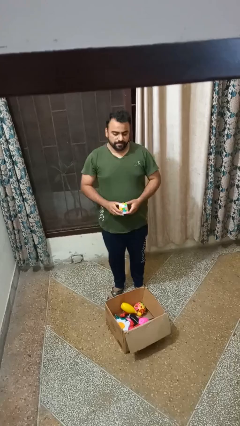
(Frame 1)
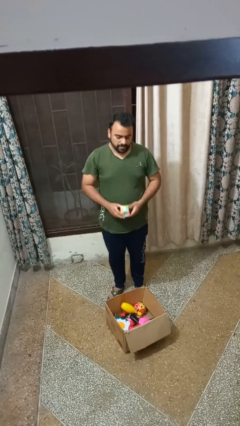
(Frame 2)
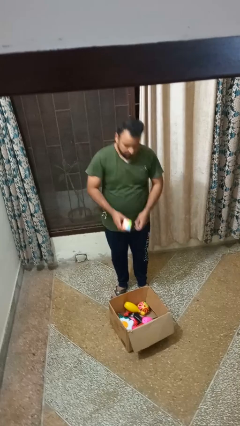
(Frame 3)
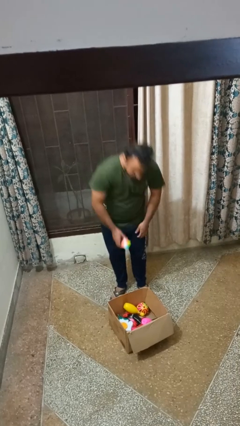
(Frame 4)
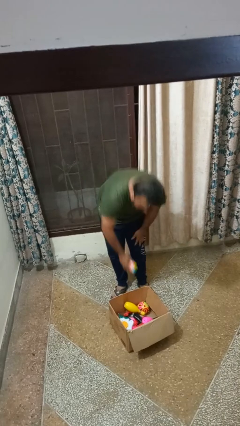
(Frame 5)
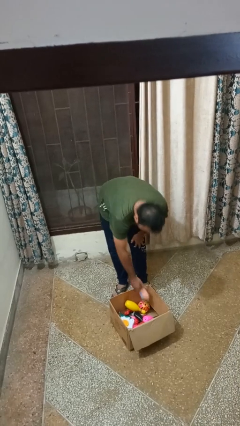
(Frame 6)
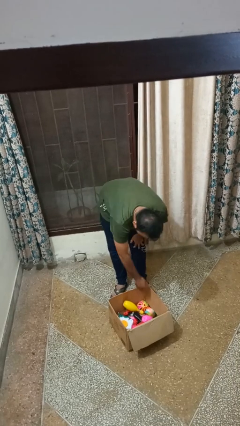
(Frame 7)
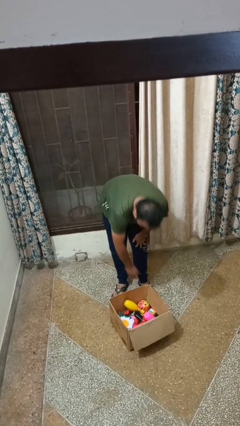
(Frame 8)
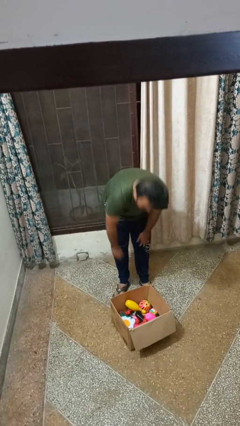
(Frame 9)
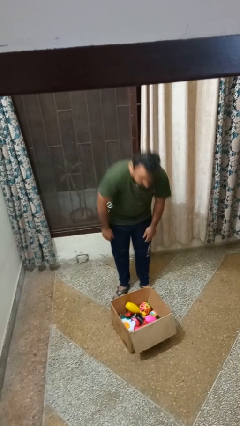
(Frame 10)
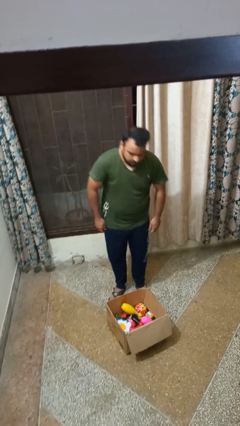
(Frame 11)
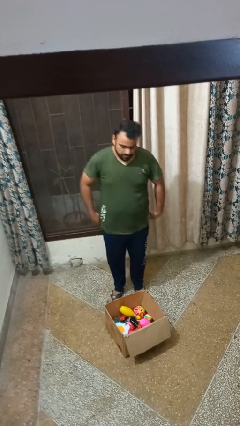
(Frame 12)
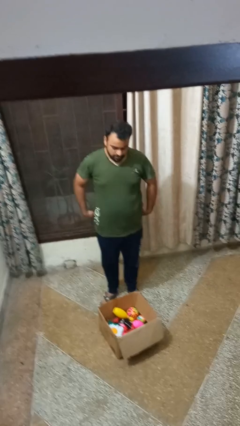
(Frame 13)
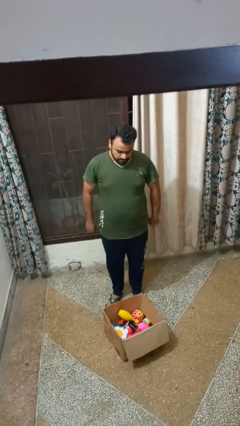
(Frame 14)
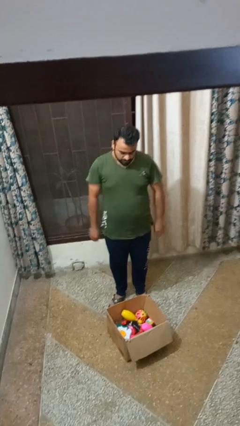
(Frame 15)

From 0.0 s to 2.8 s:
person puts object into box

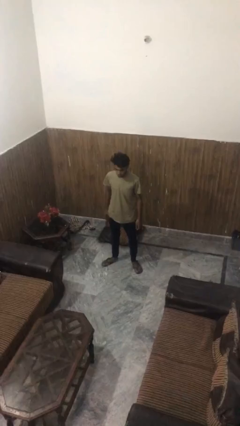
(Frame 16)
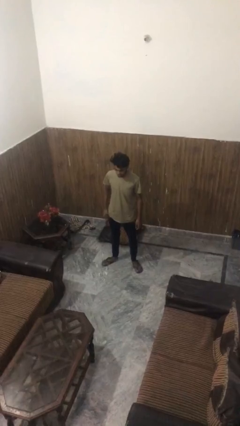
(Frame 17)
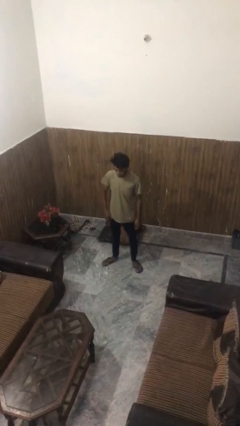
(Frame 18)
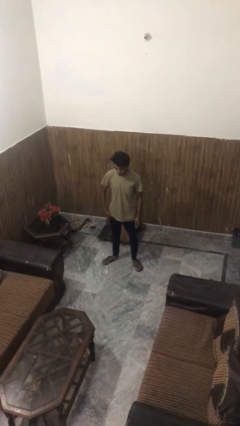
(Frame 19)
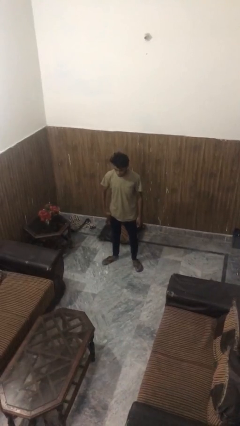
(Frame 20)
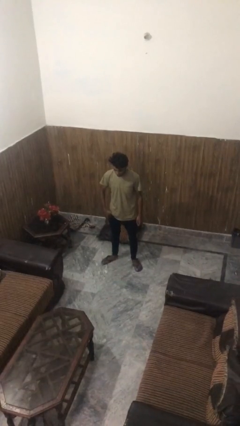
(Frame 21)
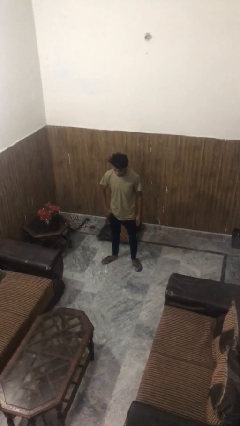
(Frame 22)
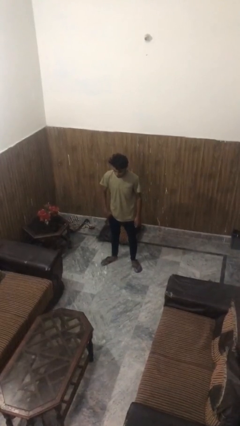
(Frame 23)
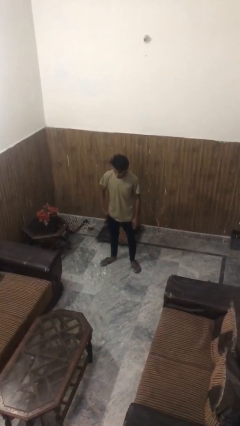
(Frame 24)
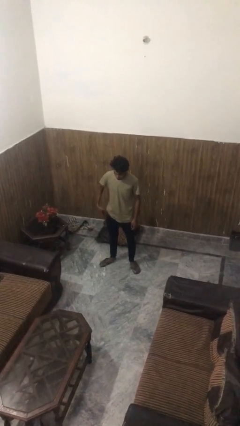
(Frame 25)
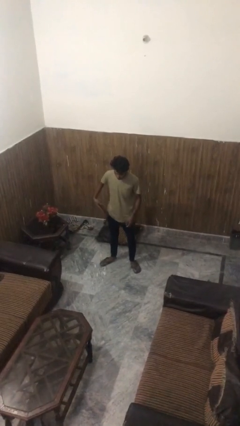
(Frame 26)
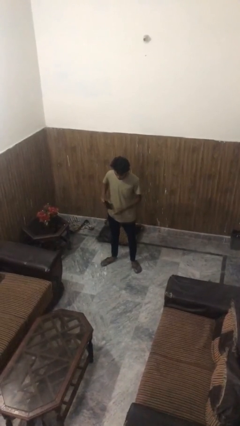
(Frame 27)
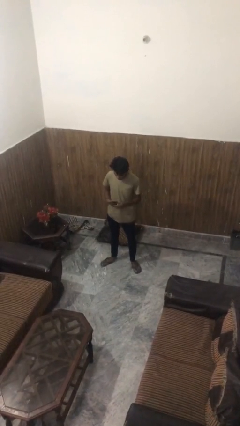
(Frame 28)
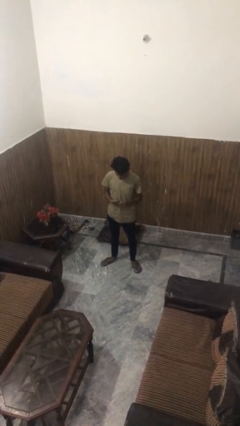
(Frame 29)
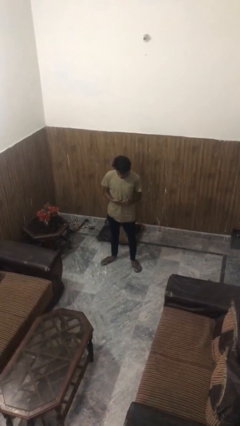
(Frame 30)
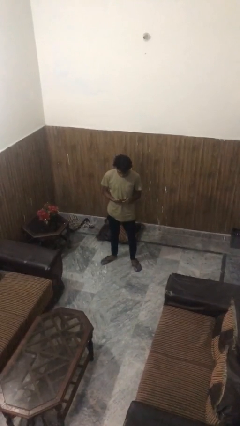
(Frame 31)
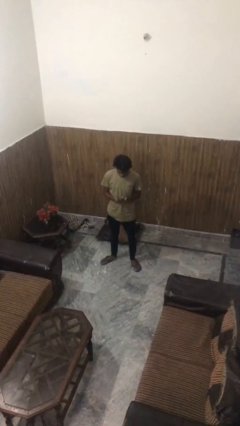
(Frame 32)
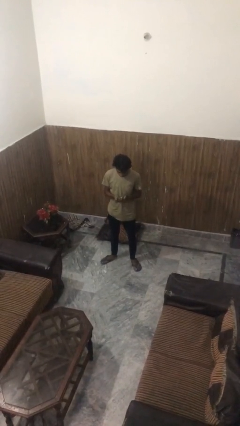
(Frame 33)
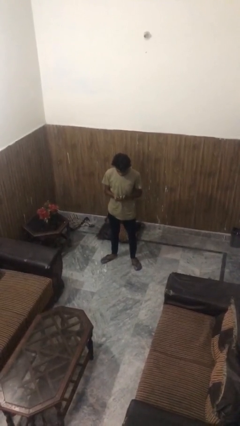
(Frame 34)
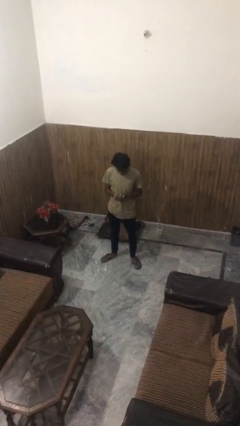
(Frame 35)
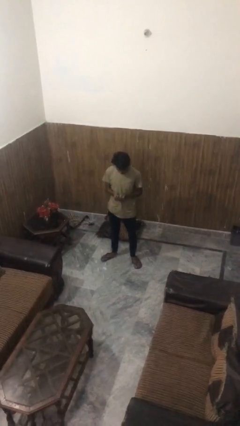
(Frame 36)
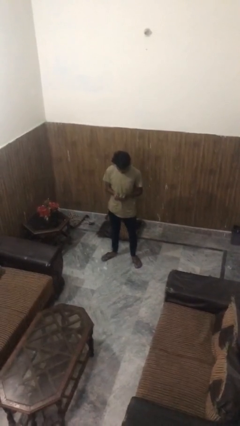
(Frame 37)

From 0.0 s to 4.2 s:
person takes phone from pocket

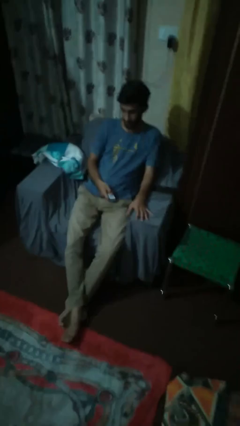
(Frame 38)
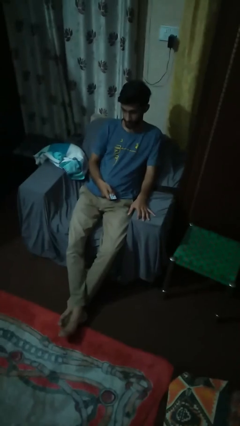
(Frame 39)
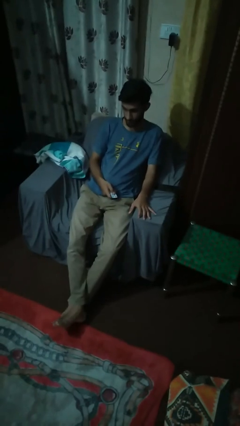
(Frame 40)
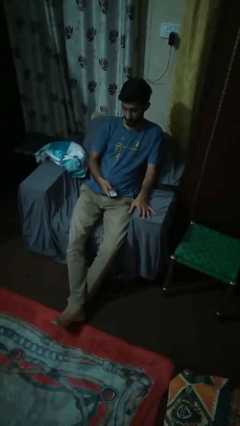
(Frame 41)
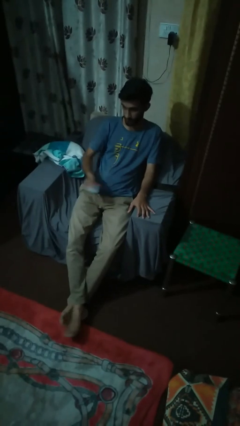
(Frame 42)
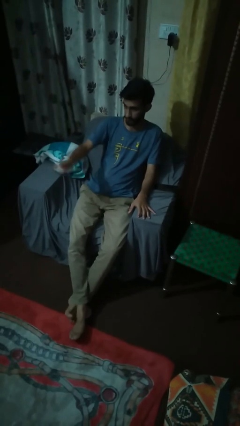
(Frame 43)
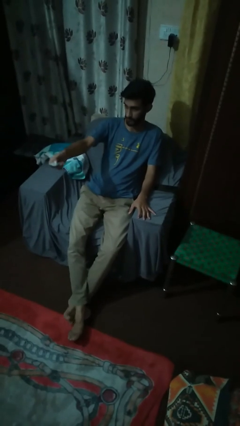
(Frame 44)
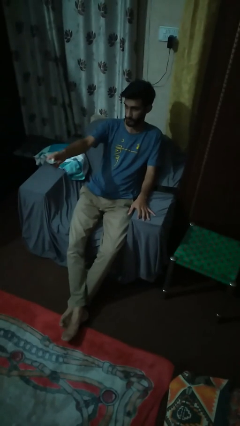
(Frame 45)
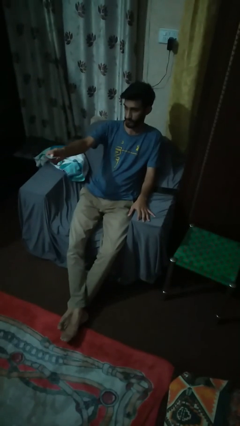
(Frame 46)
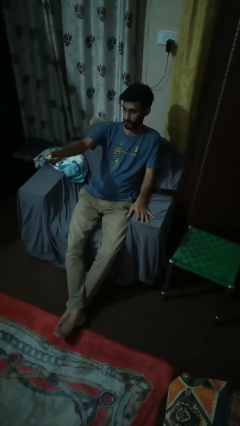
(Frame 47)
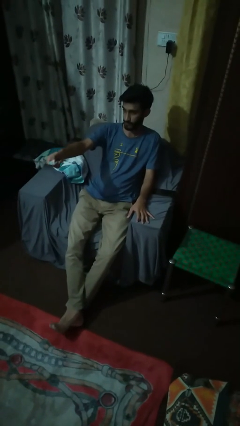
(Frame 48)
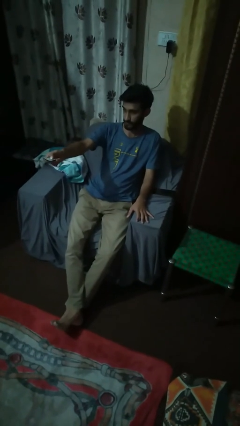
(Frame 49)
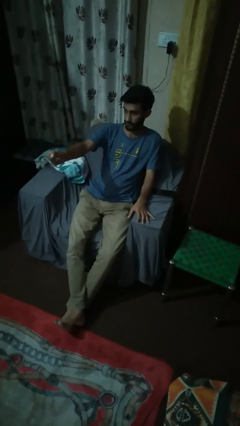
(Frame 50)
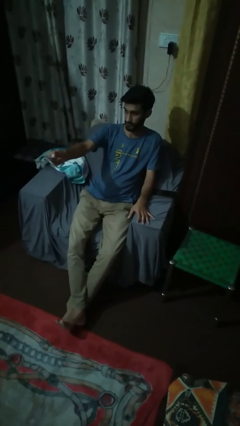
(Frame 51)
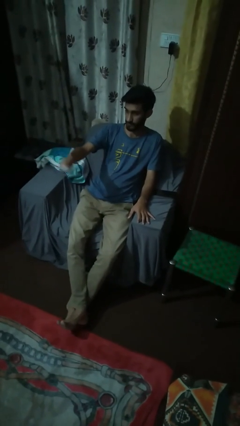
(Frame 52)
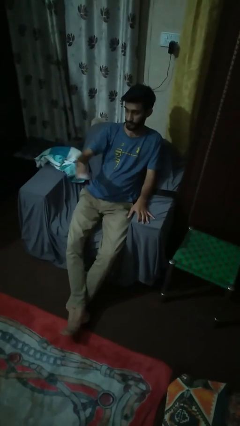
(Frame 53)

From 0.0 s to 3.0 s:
person uses television remote

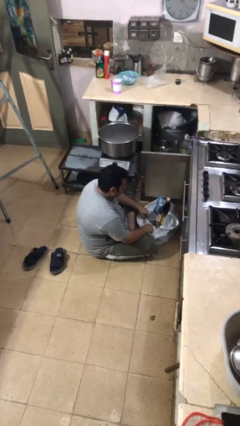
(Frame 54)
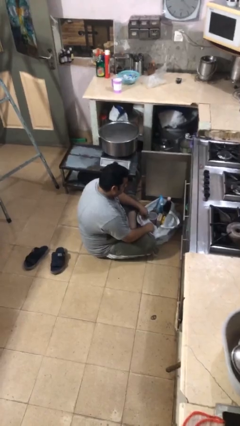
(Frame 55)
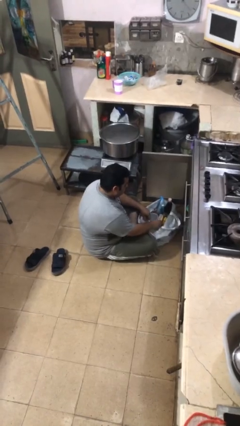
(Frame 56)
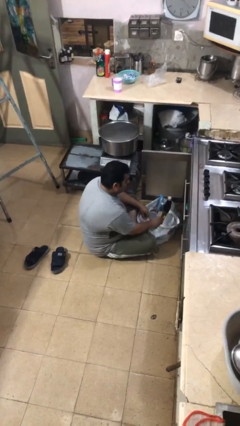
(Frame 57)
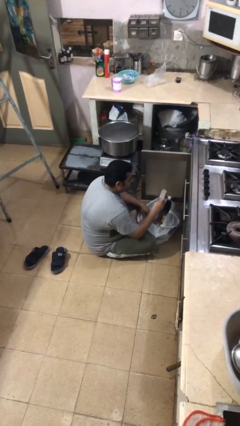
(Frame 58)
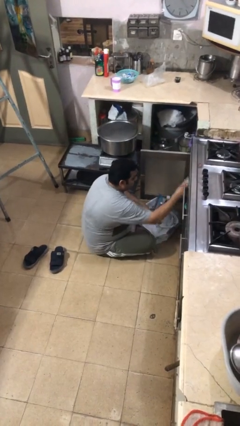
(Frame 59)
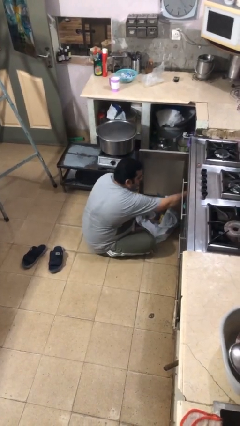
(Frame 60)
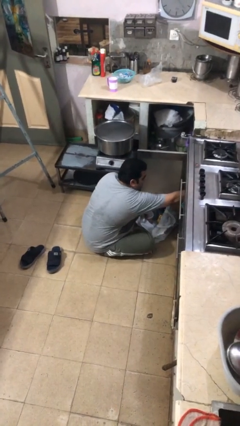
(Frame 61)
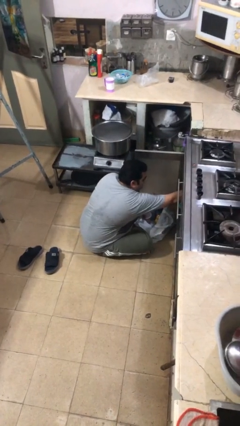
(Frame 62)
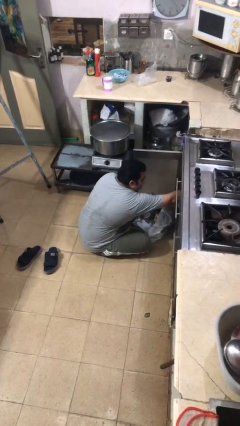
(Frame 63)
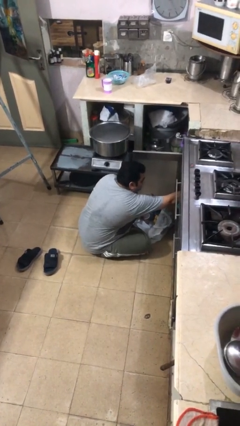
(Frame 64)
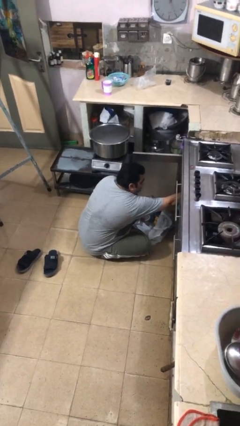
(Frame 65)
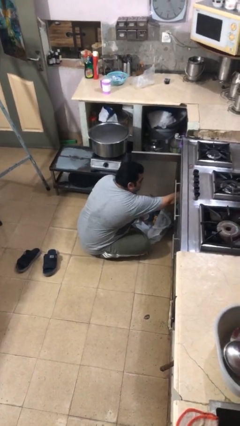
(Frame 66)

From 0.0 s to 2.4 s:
person loads groceries into cabinet

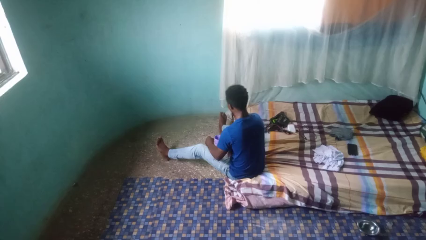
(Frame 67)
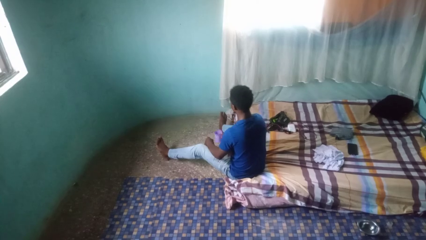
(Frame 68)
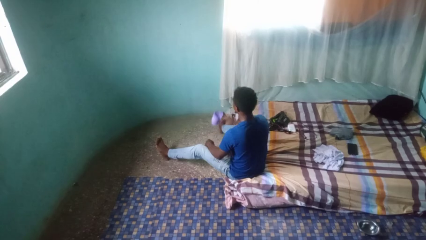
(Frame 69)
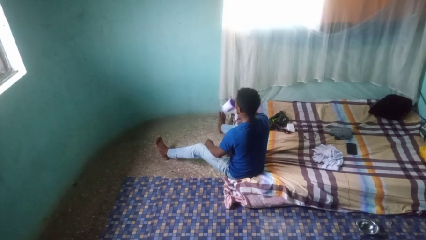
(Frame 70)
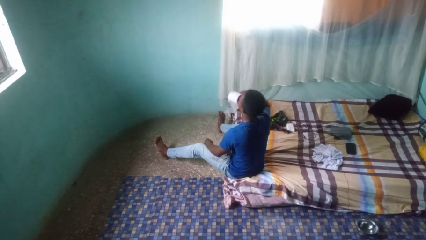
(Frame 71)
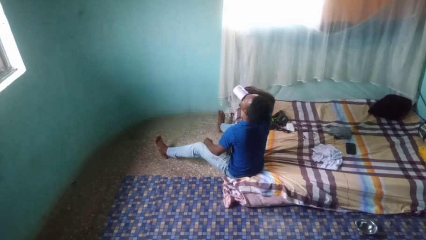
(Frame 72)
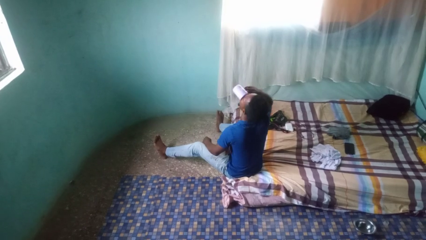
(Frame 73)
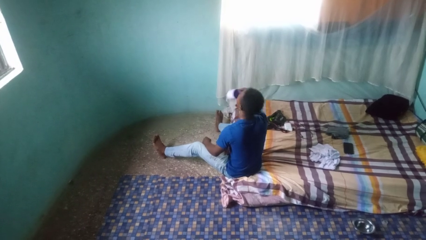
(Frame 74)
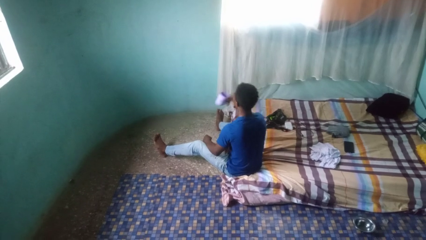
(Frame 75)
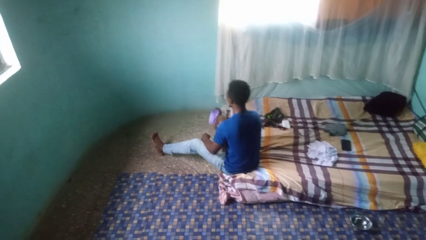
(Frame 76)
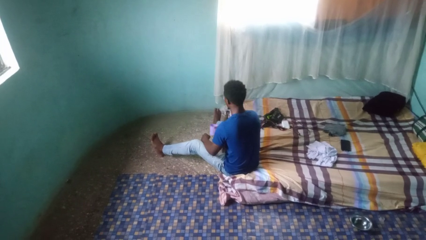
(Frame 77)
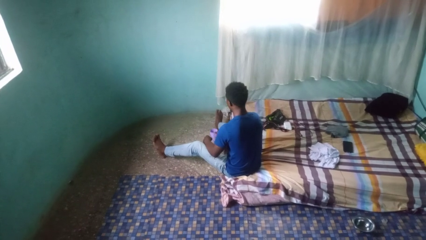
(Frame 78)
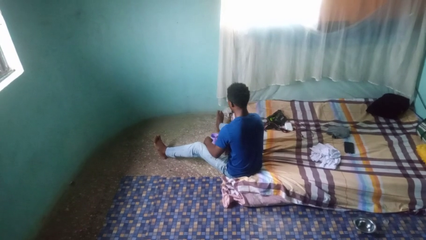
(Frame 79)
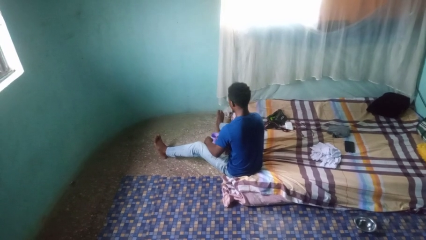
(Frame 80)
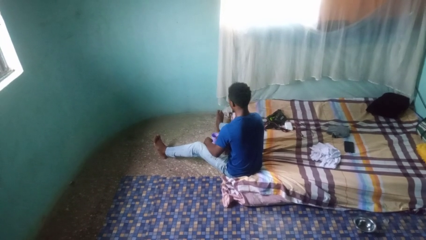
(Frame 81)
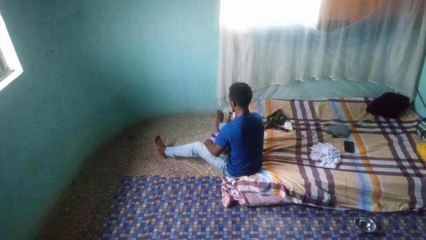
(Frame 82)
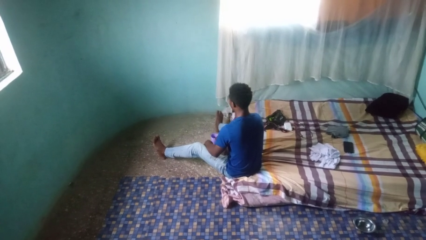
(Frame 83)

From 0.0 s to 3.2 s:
person drinks from cup

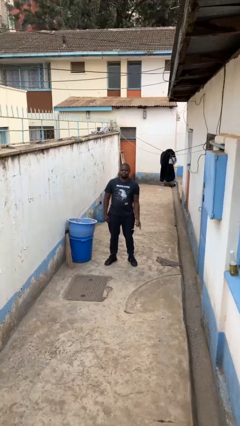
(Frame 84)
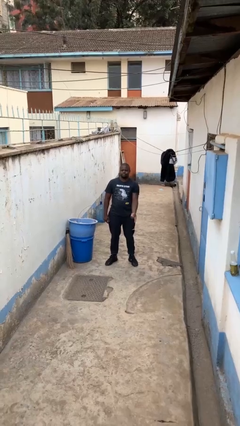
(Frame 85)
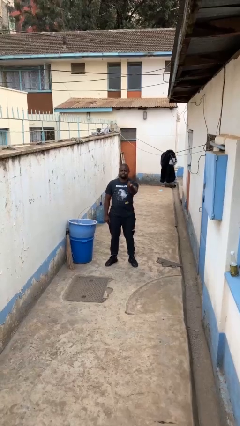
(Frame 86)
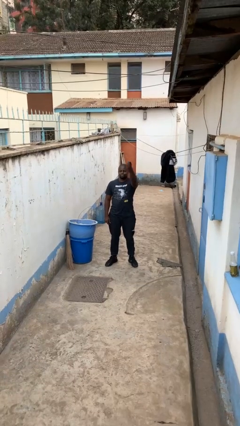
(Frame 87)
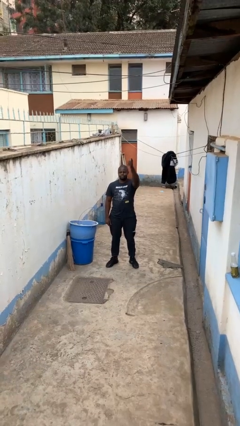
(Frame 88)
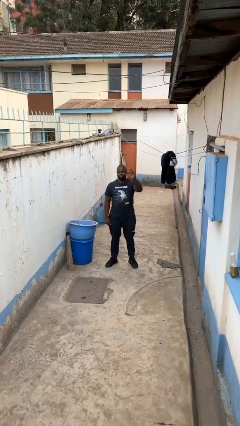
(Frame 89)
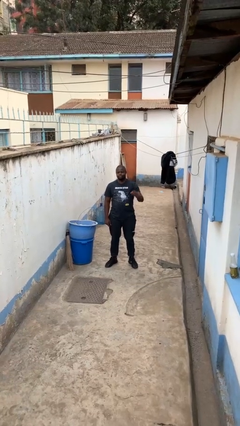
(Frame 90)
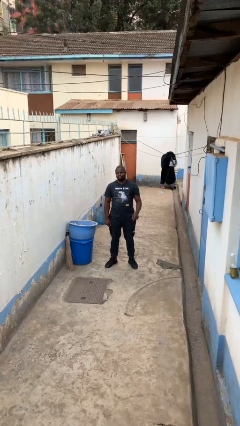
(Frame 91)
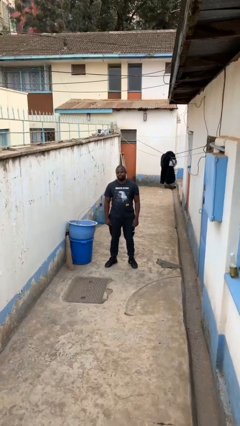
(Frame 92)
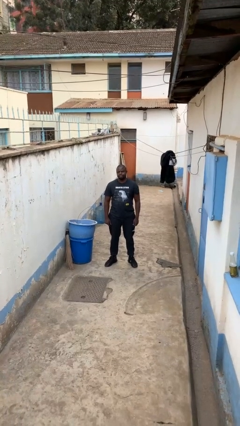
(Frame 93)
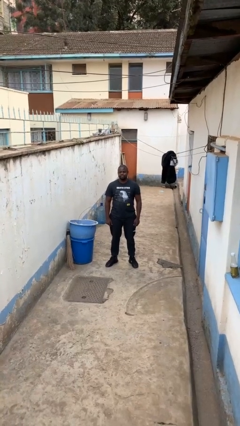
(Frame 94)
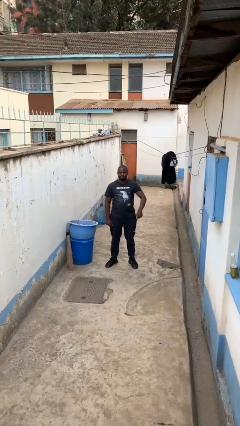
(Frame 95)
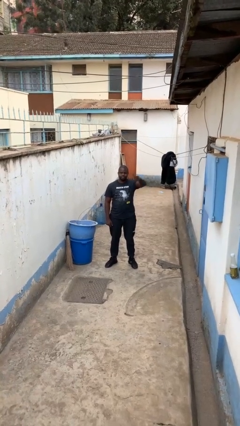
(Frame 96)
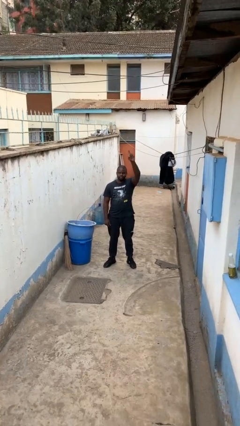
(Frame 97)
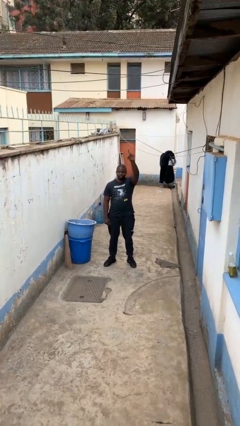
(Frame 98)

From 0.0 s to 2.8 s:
person gestures swipe up
